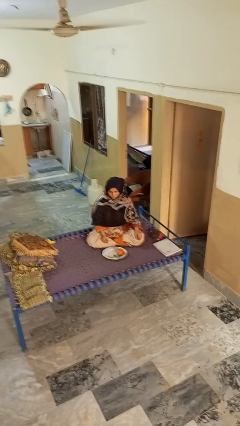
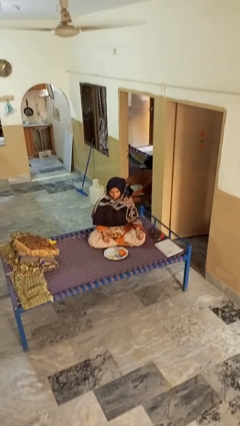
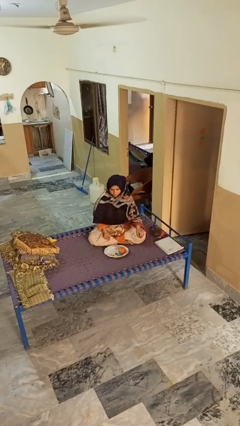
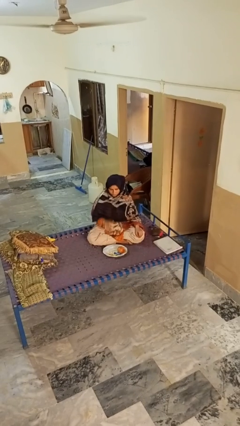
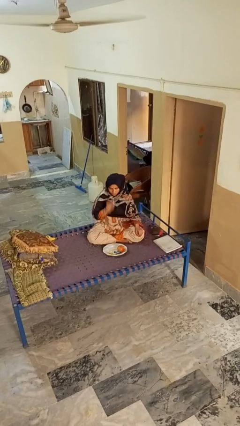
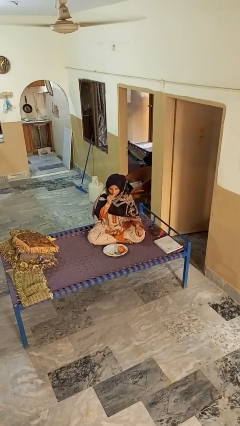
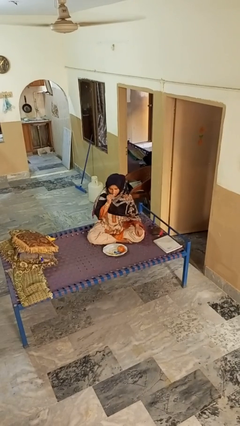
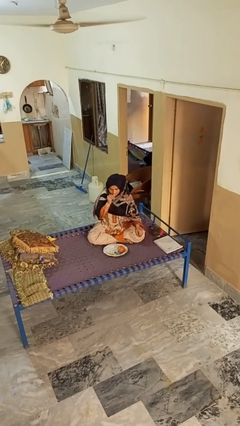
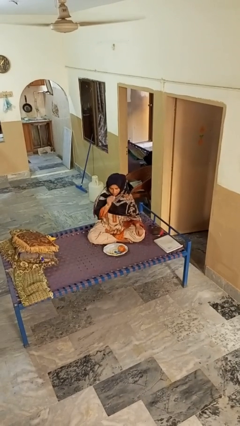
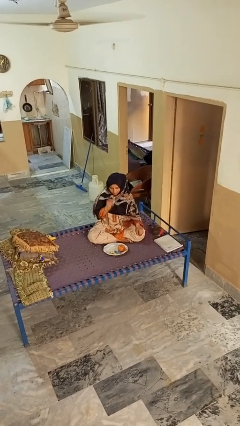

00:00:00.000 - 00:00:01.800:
person eats apple

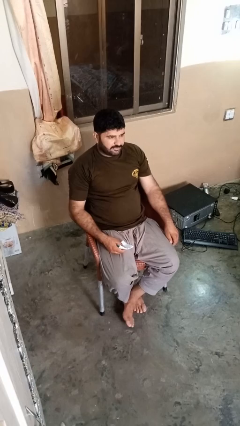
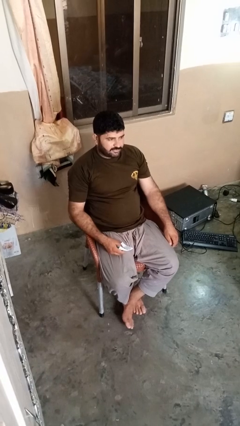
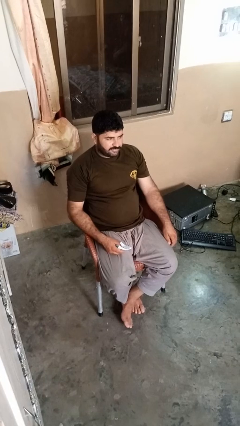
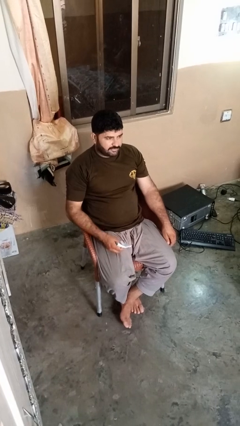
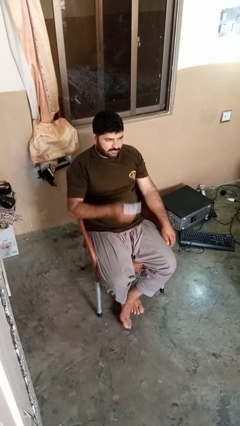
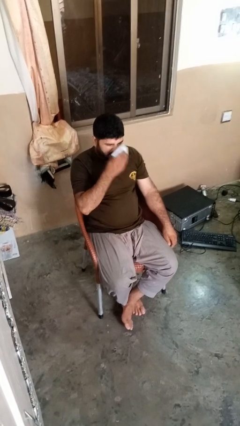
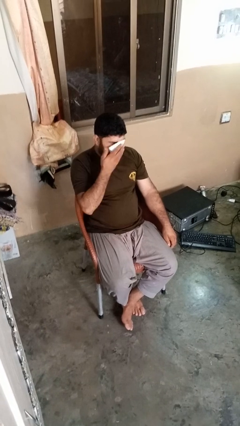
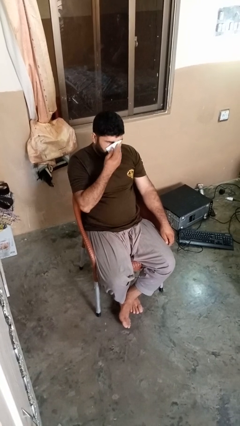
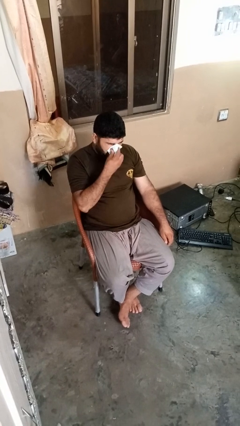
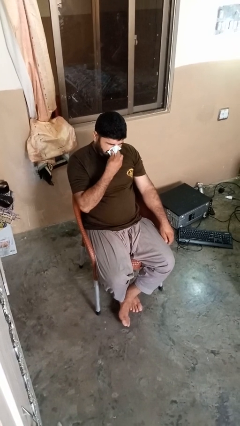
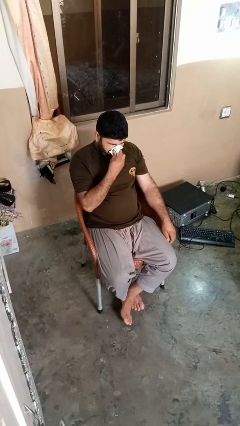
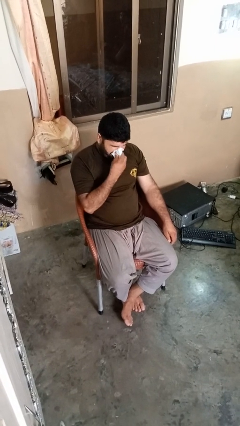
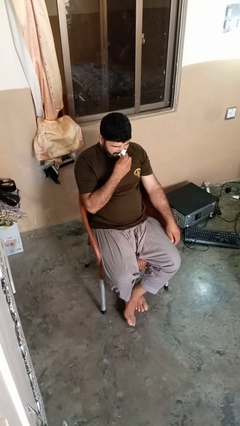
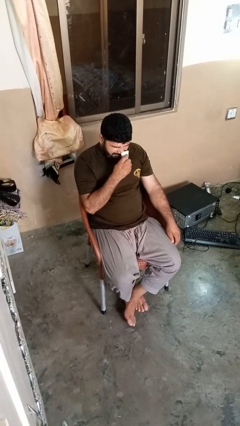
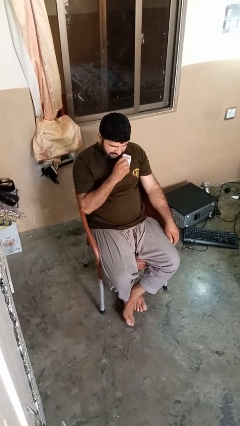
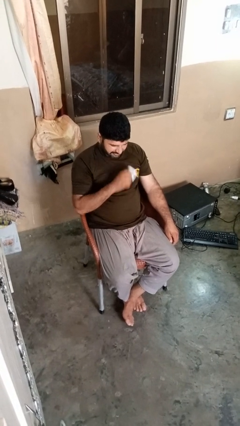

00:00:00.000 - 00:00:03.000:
person blows nose

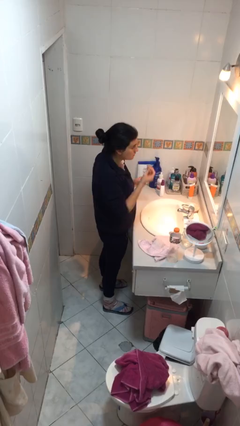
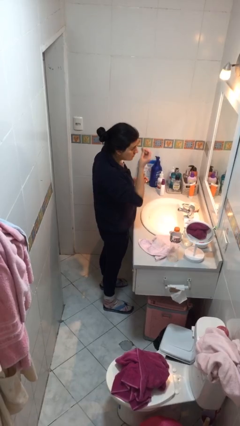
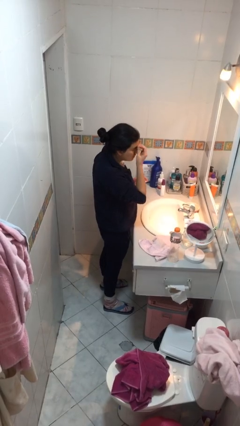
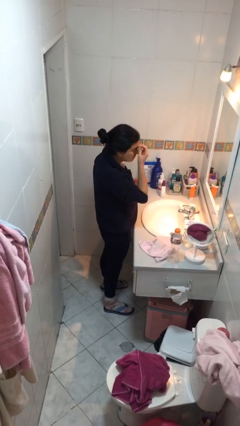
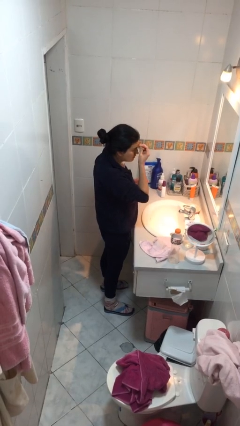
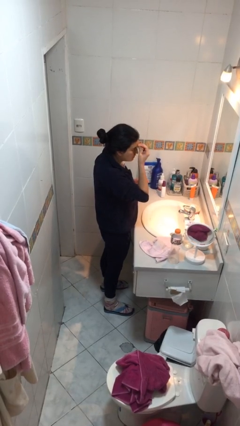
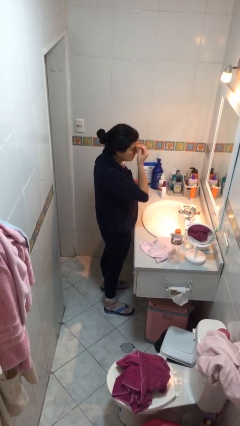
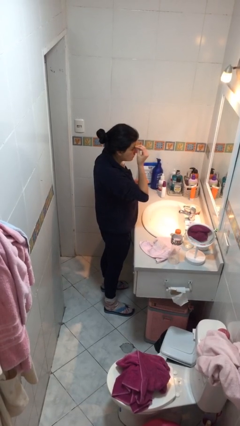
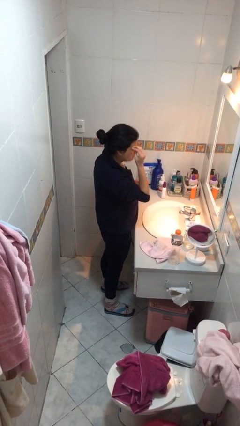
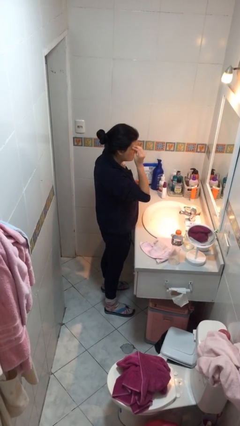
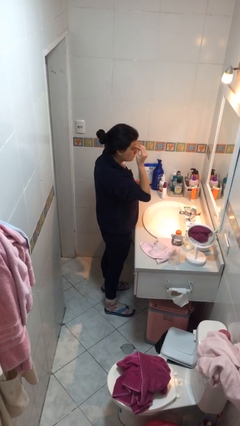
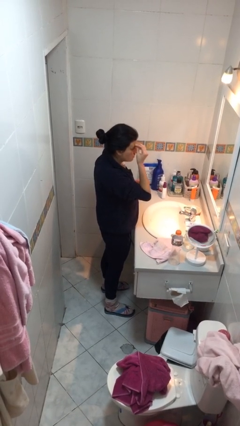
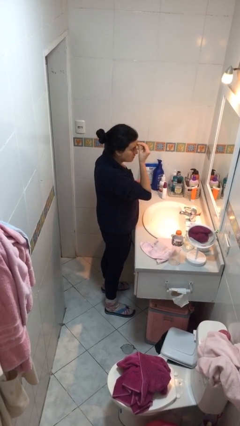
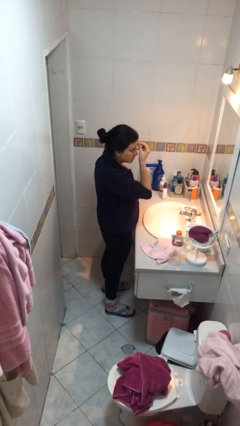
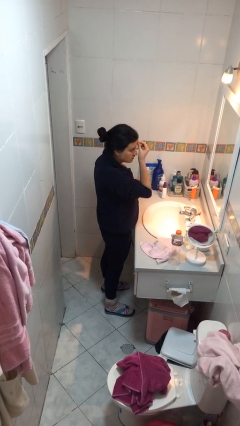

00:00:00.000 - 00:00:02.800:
person applies foundation makeup

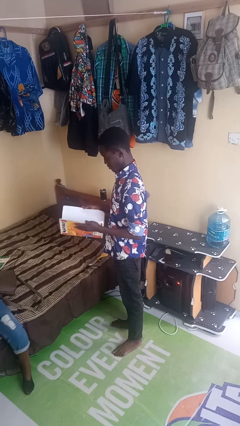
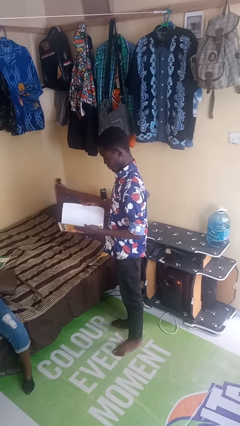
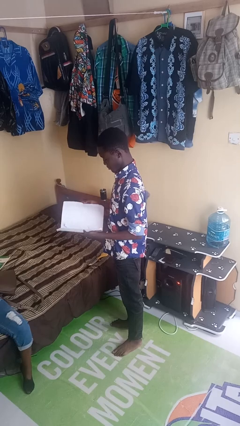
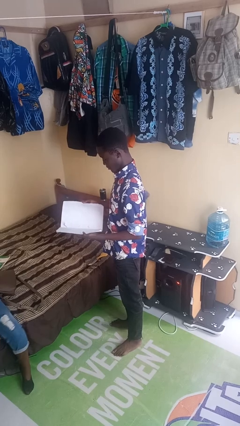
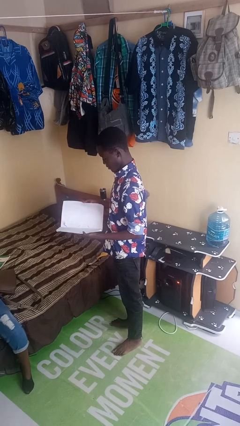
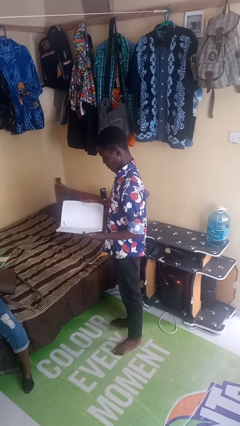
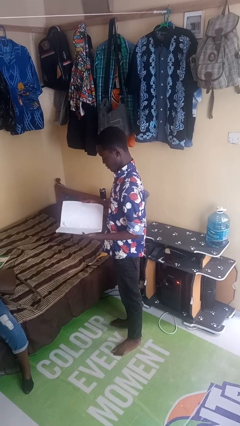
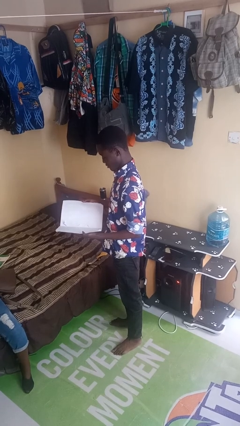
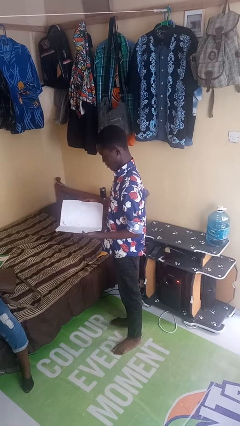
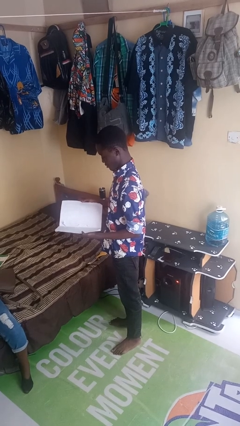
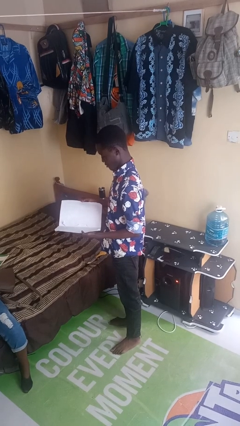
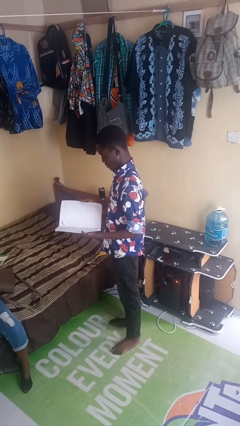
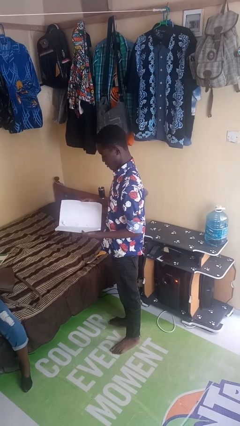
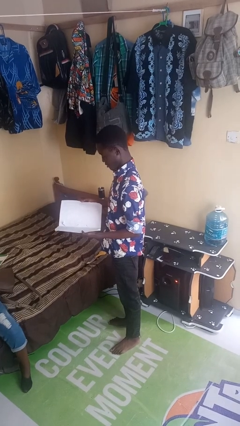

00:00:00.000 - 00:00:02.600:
person reads book

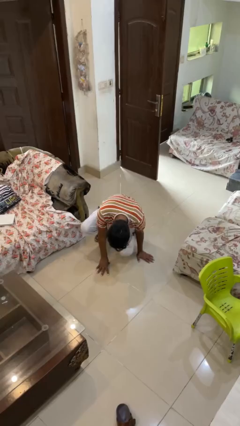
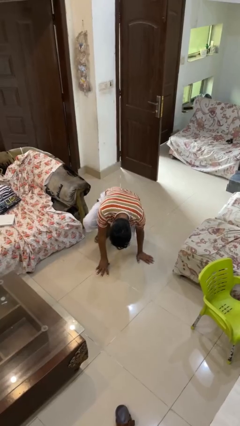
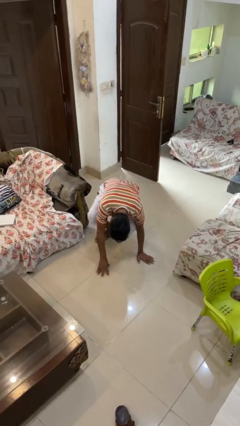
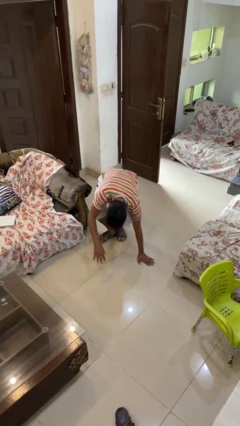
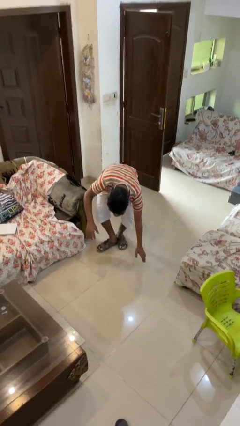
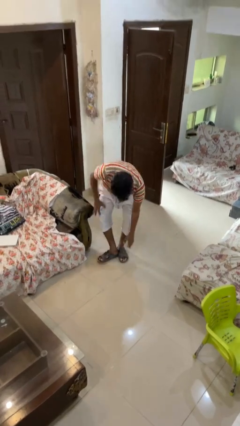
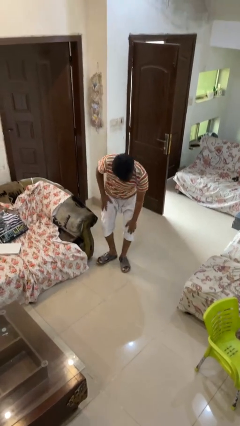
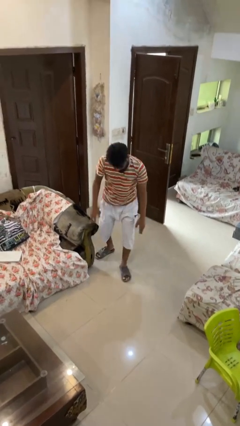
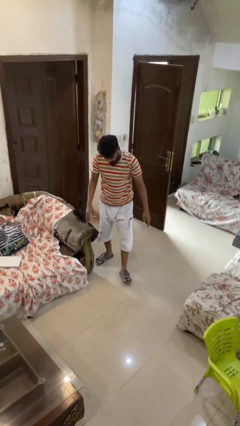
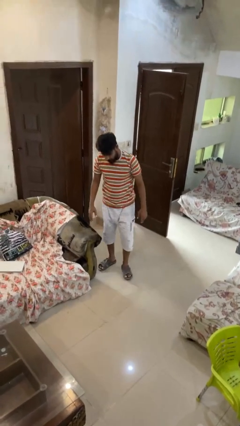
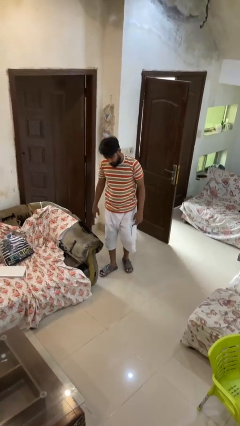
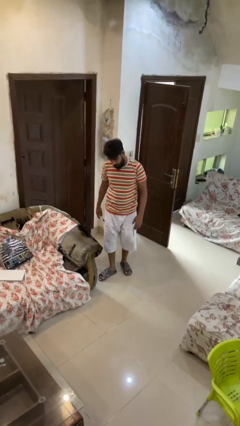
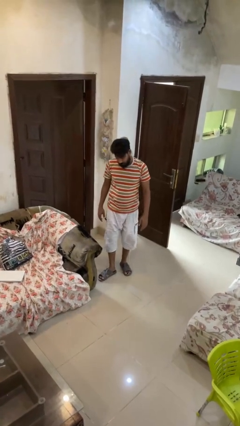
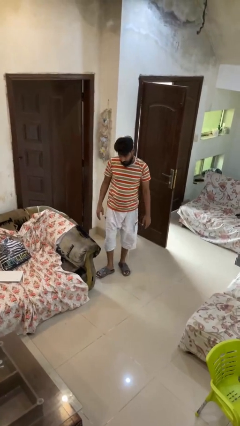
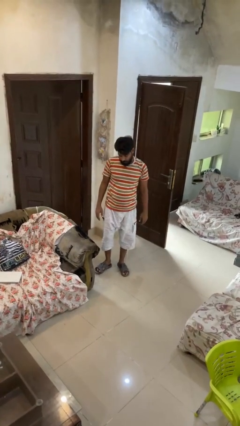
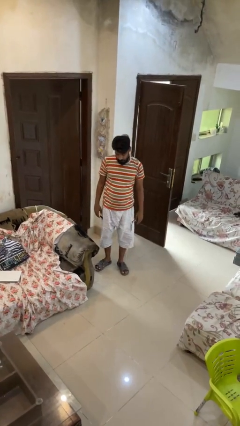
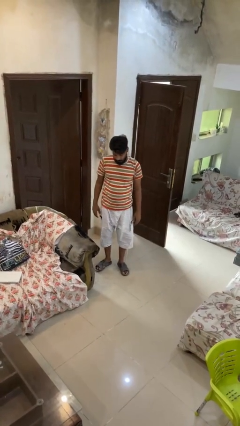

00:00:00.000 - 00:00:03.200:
person stands up from floor

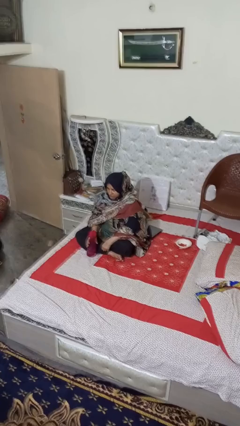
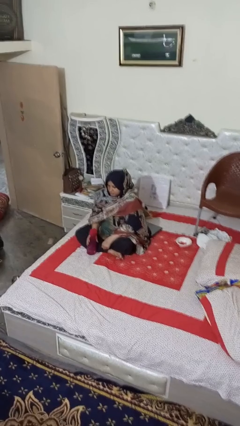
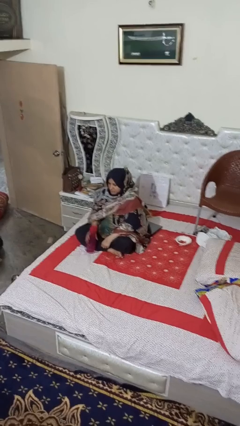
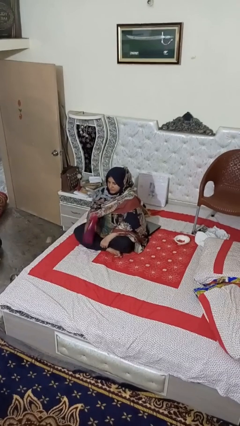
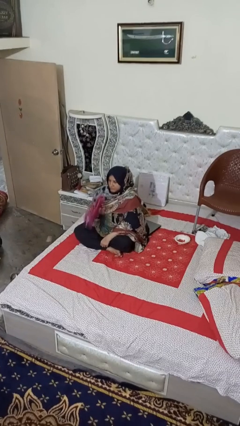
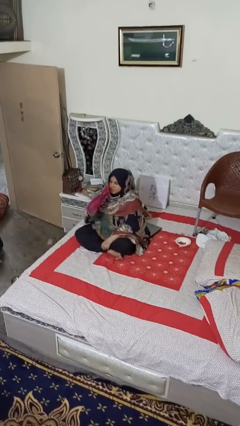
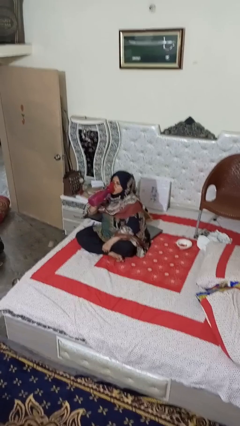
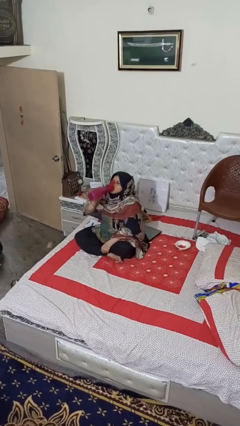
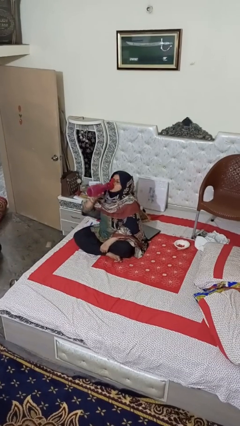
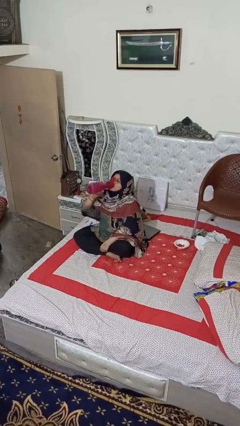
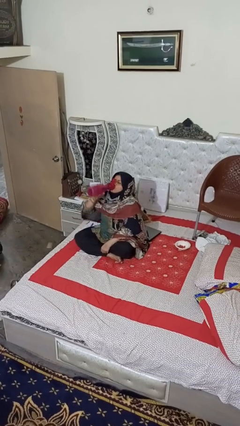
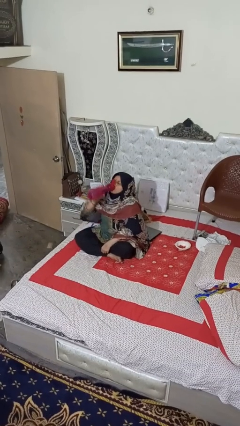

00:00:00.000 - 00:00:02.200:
person drinks from bottle

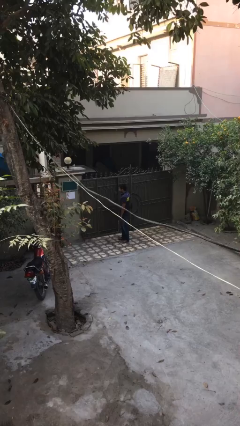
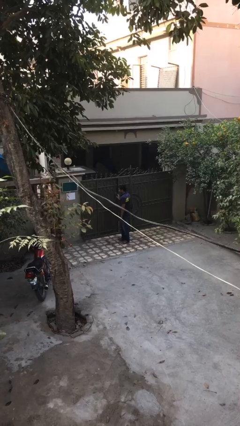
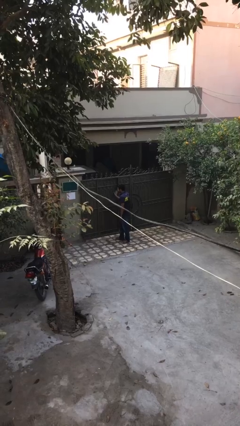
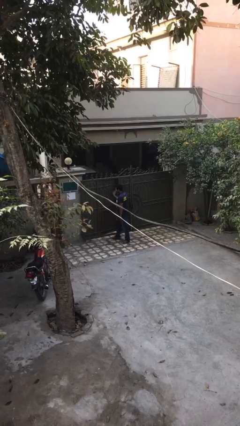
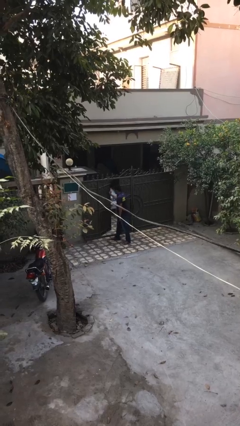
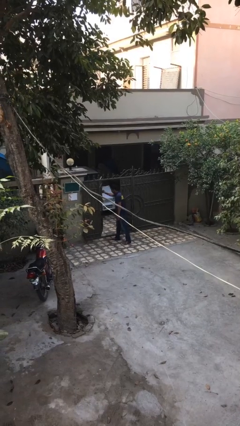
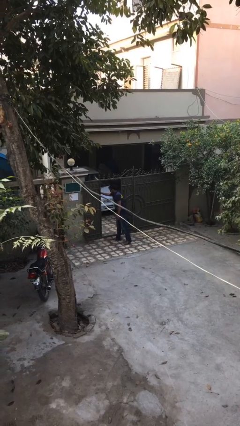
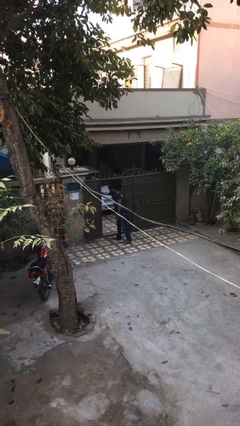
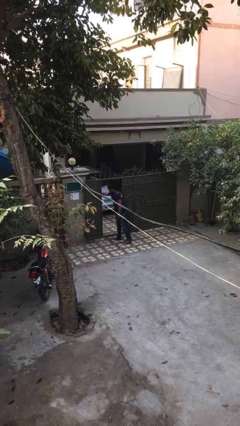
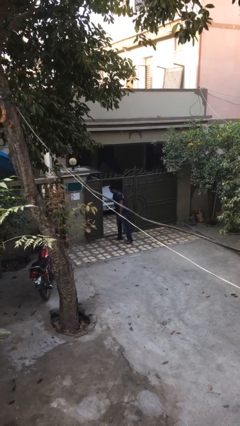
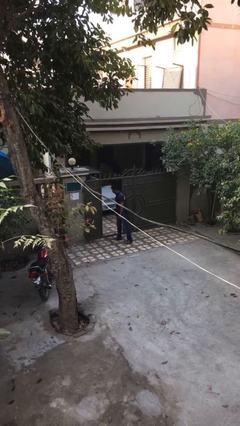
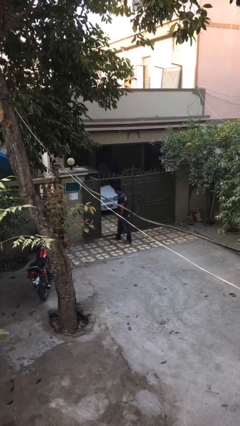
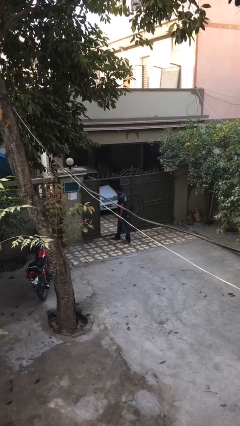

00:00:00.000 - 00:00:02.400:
person opens facility door
